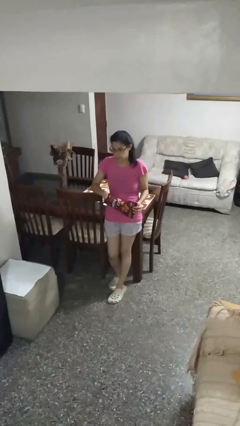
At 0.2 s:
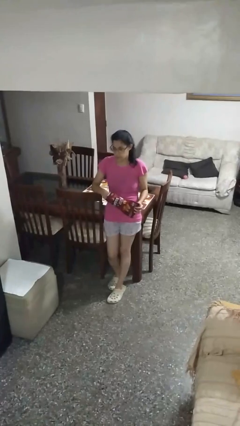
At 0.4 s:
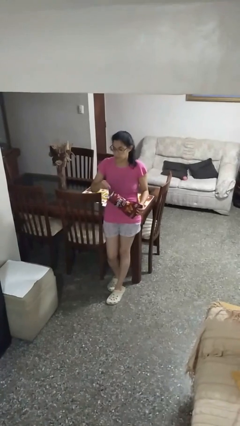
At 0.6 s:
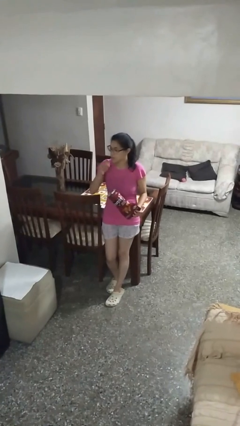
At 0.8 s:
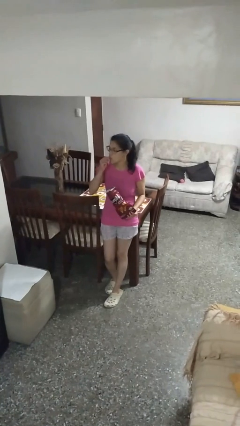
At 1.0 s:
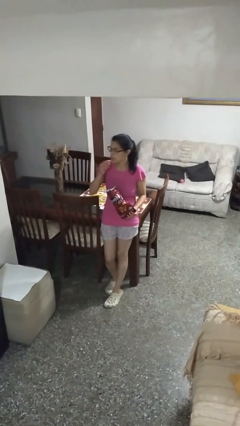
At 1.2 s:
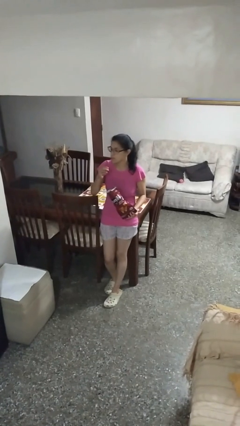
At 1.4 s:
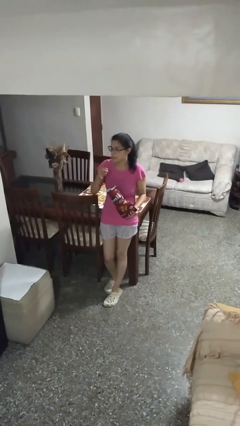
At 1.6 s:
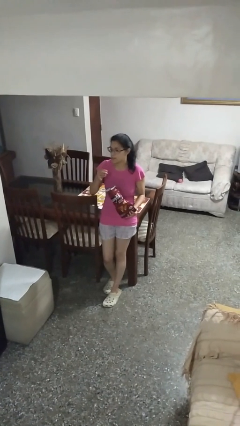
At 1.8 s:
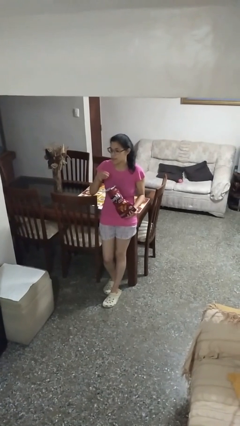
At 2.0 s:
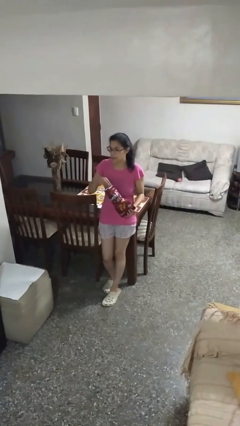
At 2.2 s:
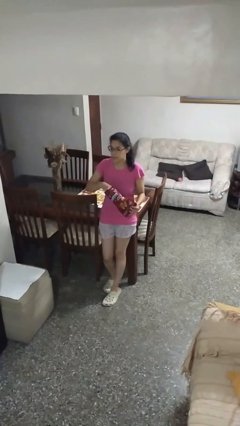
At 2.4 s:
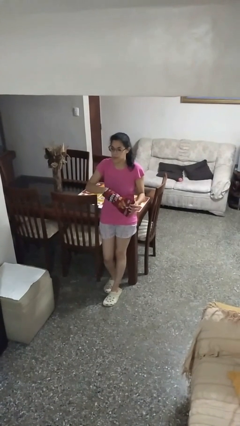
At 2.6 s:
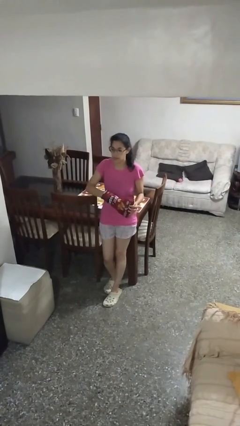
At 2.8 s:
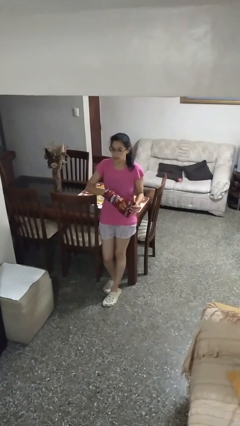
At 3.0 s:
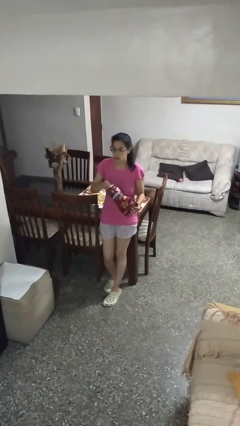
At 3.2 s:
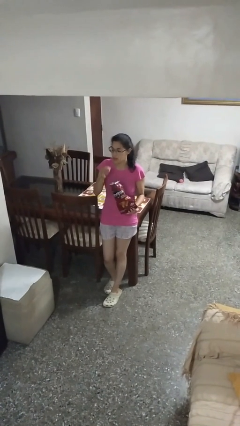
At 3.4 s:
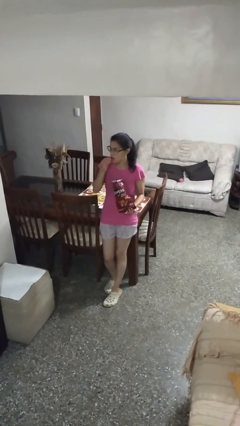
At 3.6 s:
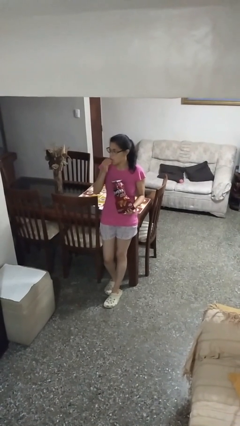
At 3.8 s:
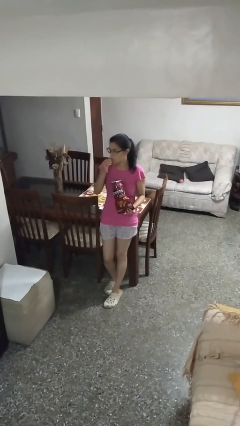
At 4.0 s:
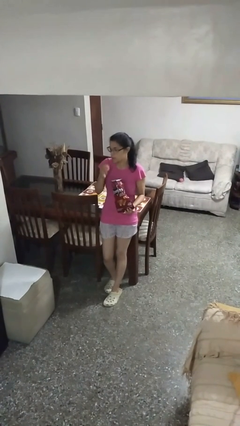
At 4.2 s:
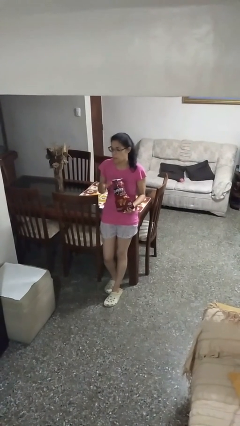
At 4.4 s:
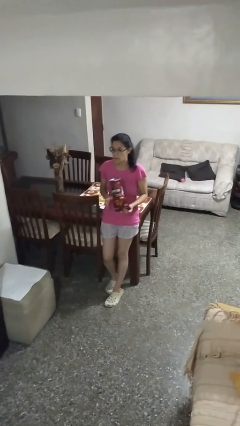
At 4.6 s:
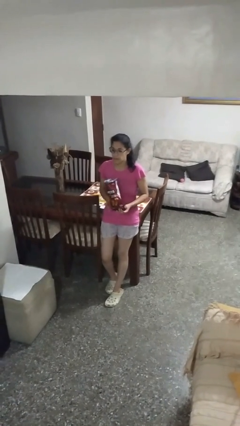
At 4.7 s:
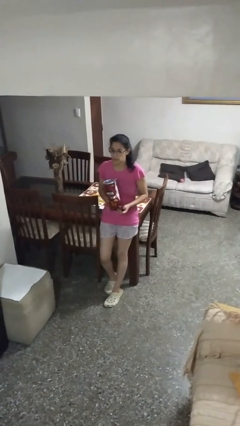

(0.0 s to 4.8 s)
person eats snack from bag

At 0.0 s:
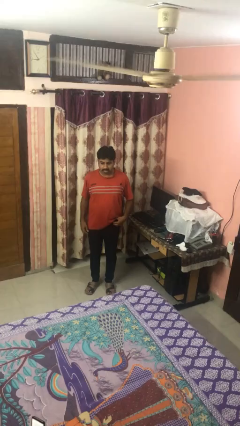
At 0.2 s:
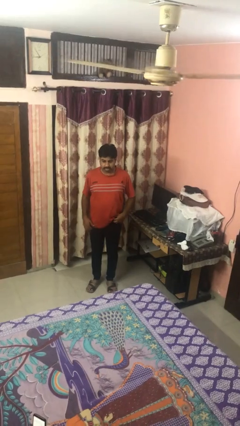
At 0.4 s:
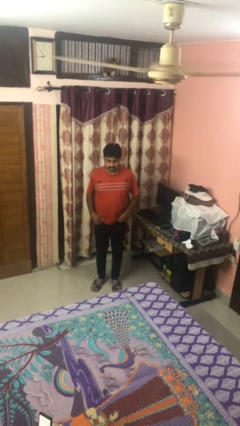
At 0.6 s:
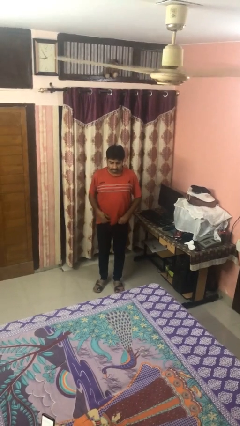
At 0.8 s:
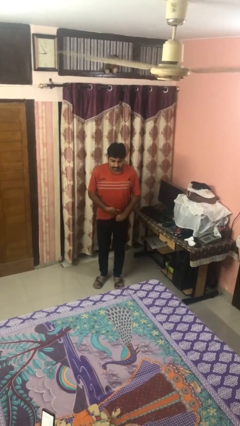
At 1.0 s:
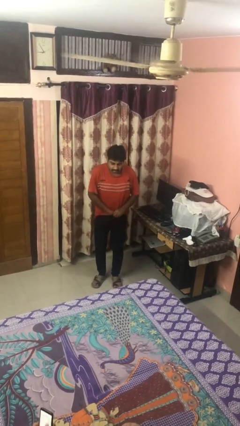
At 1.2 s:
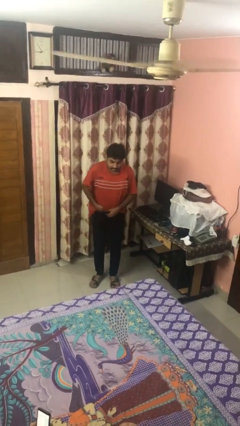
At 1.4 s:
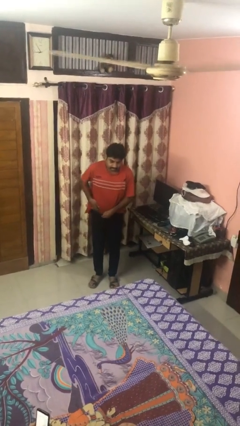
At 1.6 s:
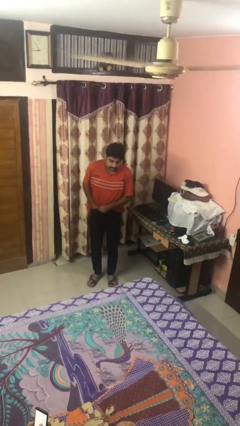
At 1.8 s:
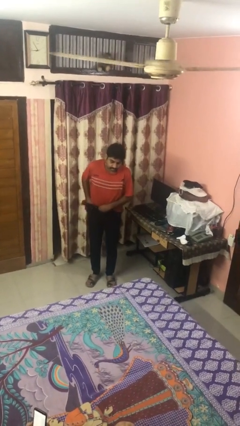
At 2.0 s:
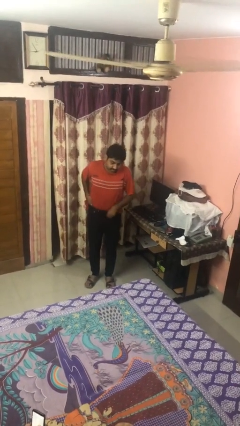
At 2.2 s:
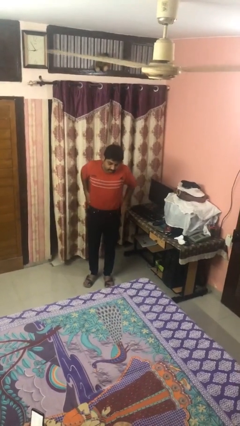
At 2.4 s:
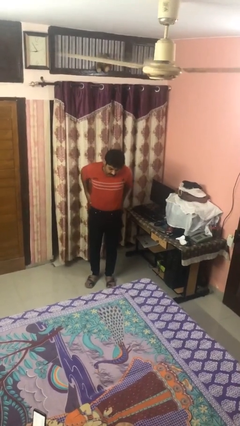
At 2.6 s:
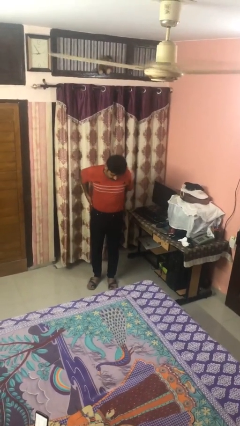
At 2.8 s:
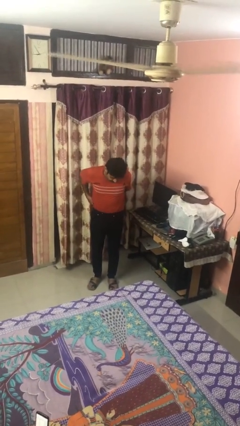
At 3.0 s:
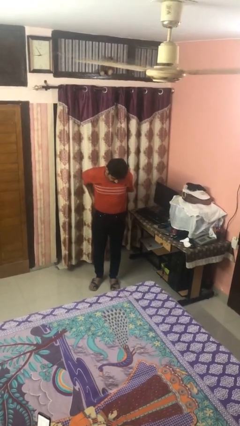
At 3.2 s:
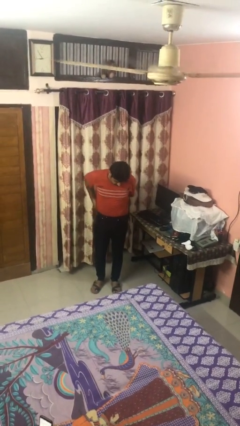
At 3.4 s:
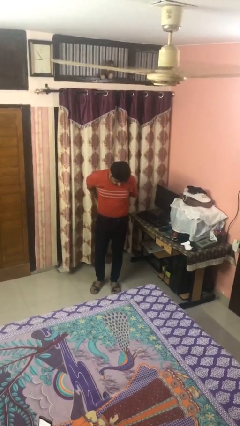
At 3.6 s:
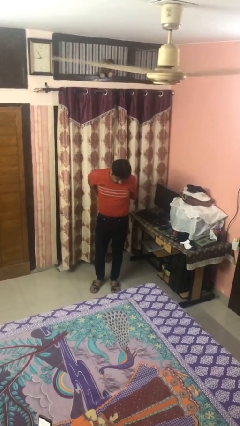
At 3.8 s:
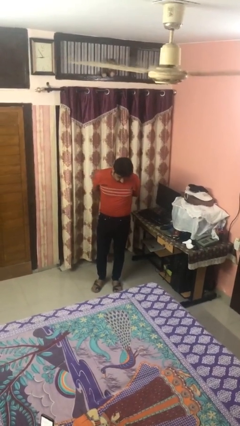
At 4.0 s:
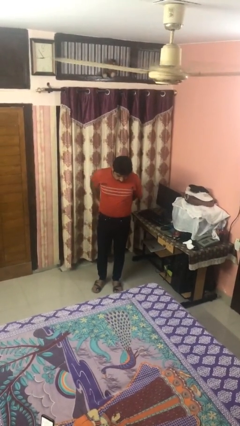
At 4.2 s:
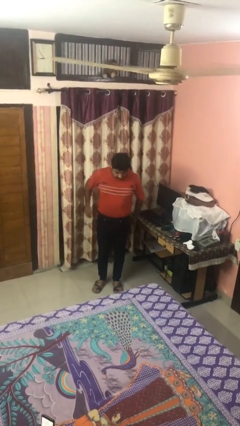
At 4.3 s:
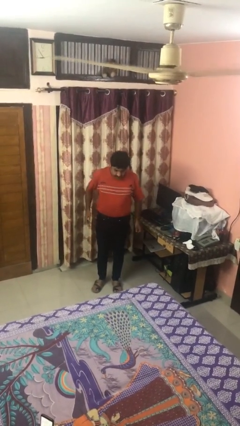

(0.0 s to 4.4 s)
person tucks in shirt

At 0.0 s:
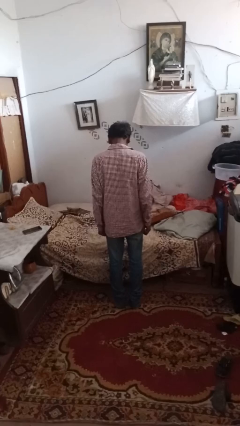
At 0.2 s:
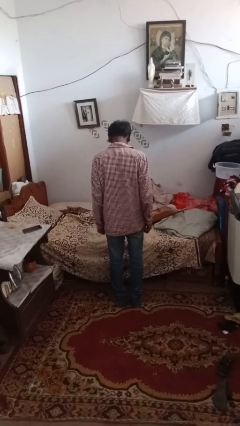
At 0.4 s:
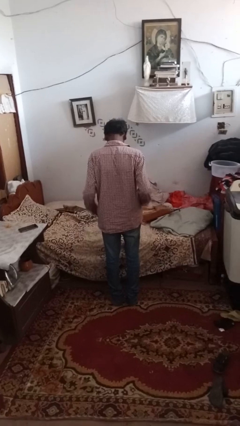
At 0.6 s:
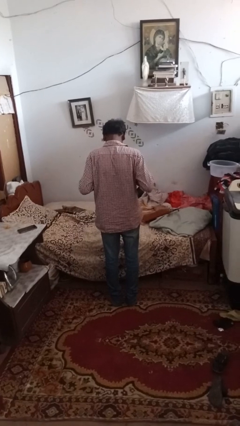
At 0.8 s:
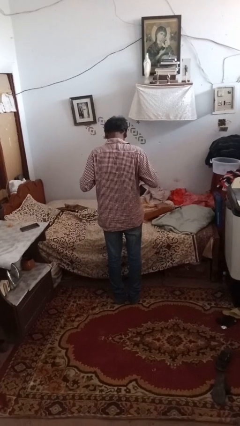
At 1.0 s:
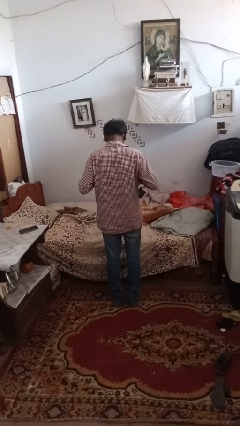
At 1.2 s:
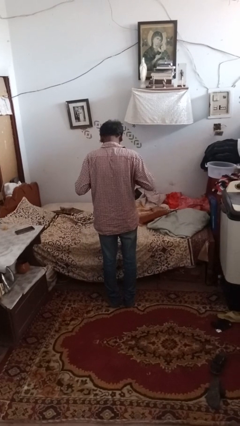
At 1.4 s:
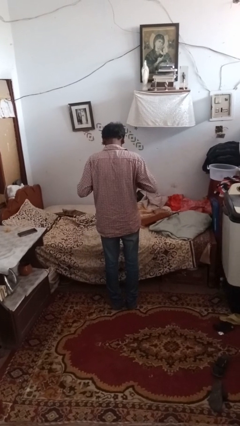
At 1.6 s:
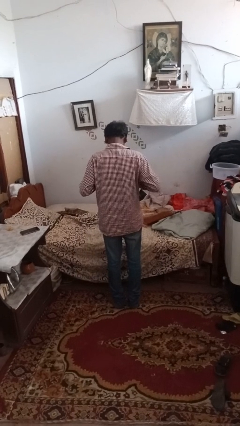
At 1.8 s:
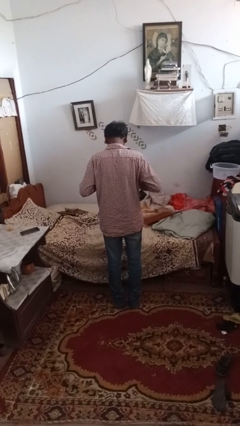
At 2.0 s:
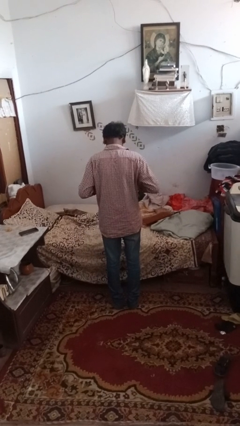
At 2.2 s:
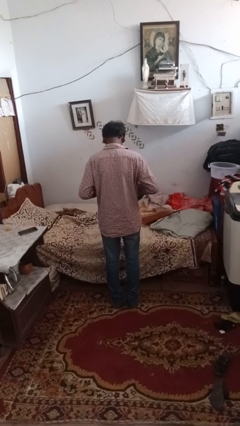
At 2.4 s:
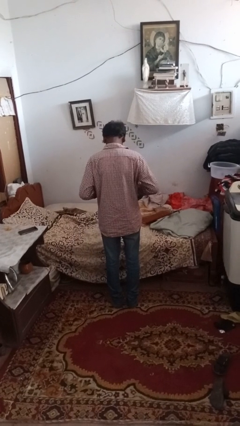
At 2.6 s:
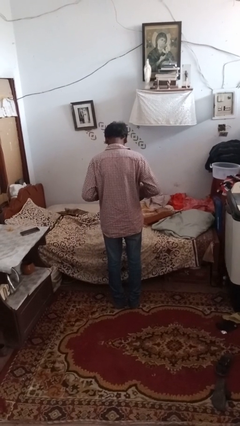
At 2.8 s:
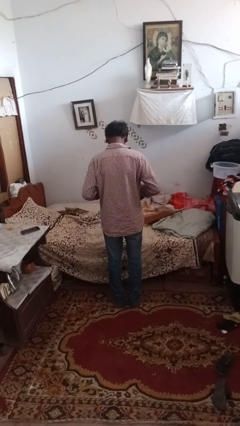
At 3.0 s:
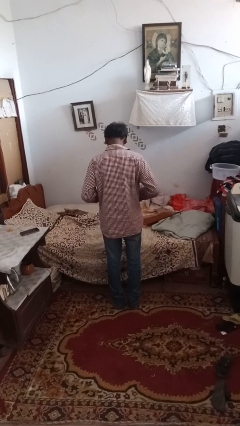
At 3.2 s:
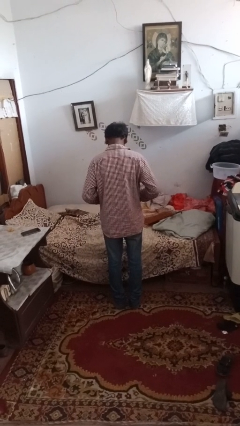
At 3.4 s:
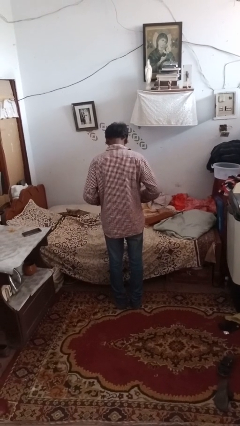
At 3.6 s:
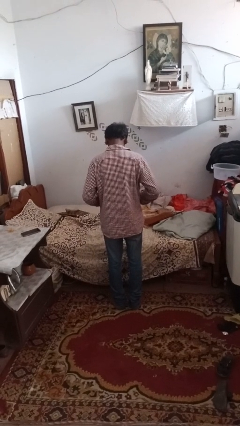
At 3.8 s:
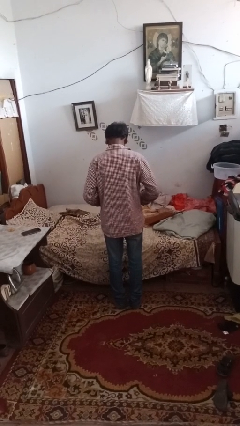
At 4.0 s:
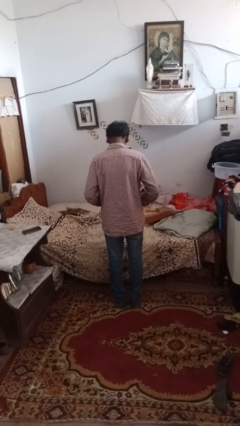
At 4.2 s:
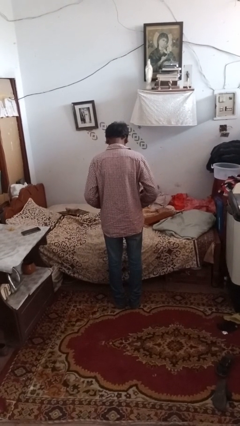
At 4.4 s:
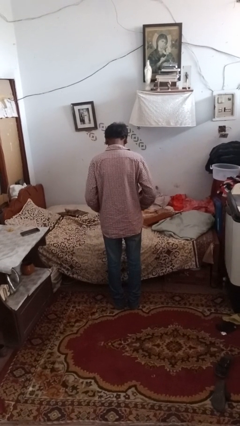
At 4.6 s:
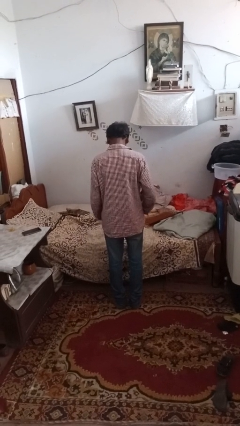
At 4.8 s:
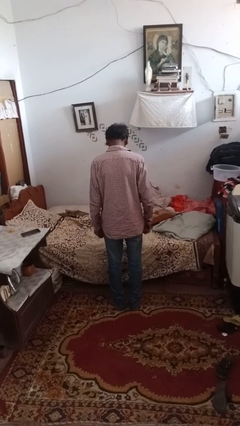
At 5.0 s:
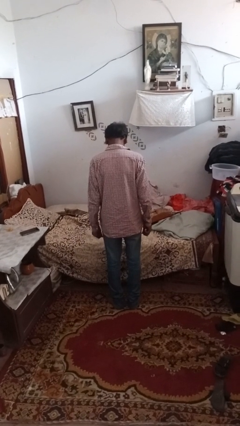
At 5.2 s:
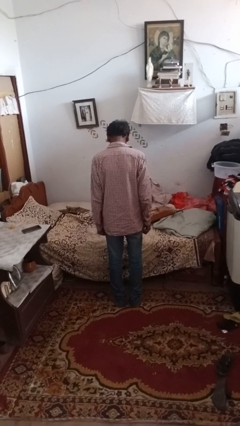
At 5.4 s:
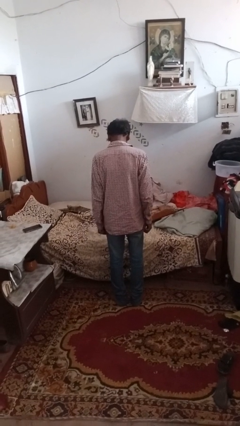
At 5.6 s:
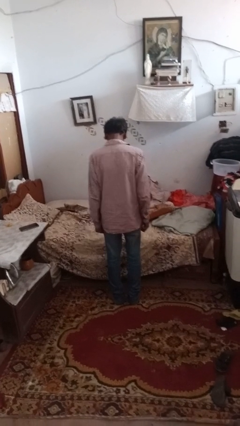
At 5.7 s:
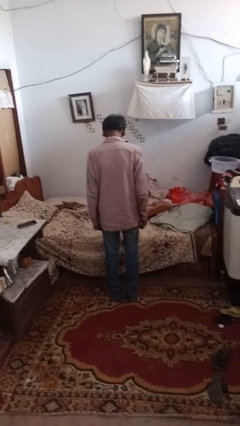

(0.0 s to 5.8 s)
person unbuttons shirt

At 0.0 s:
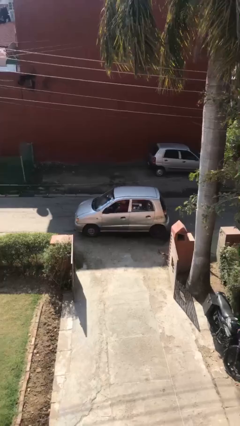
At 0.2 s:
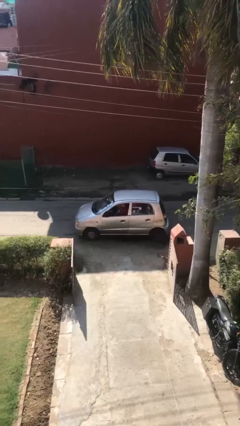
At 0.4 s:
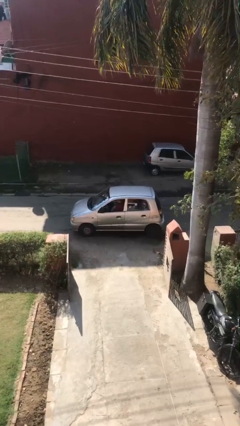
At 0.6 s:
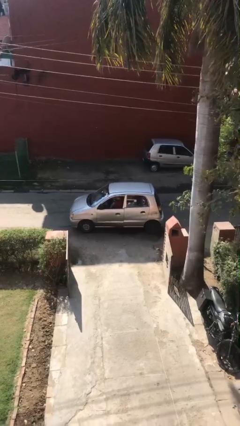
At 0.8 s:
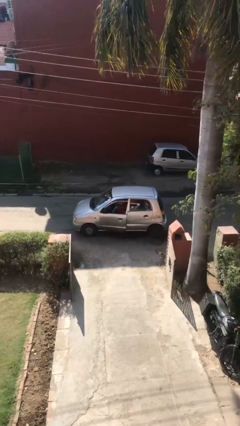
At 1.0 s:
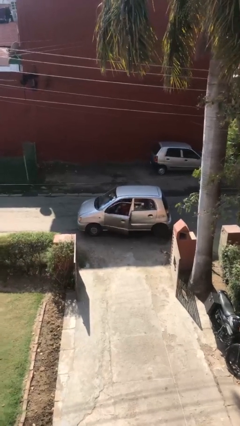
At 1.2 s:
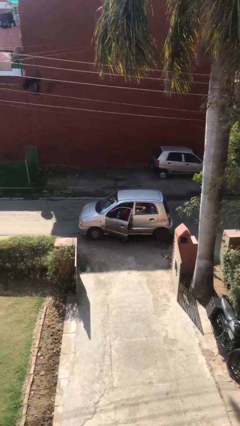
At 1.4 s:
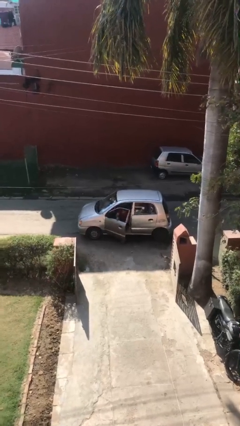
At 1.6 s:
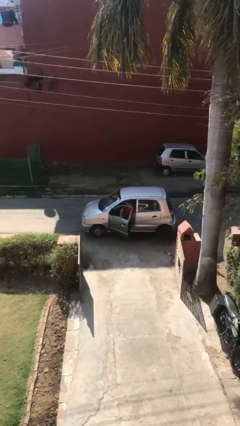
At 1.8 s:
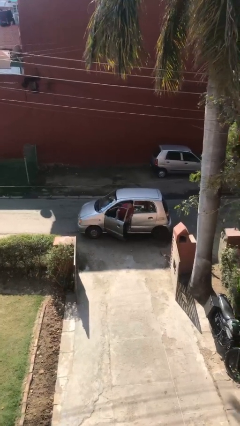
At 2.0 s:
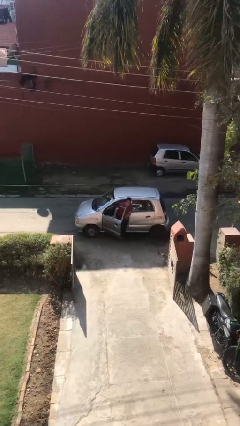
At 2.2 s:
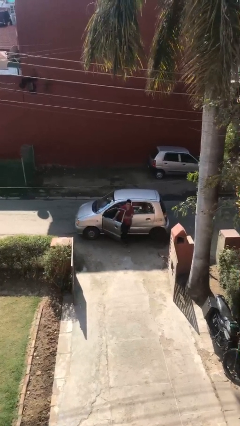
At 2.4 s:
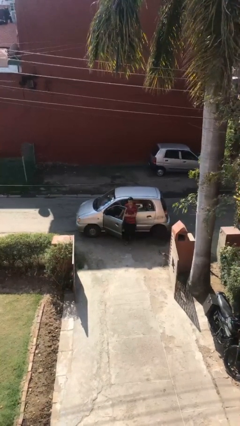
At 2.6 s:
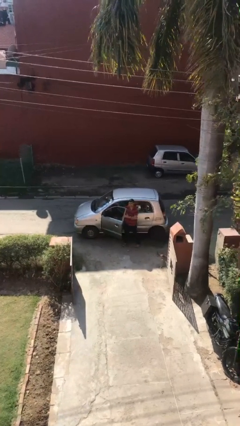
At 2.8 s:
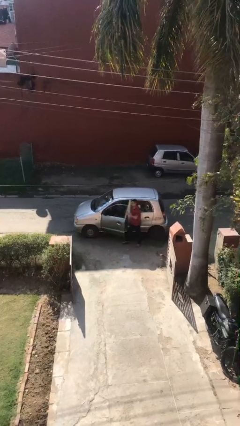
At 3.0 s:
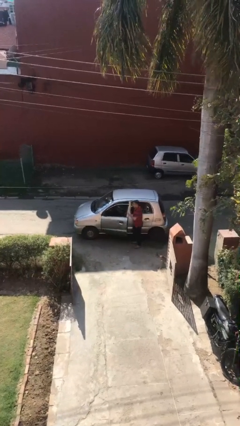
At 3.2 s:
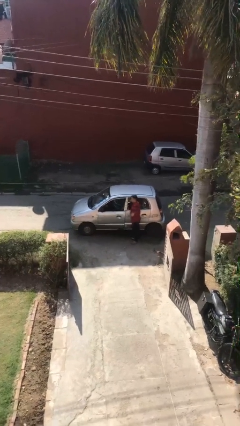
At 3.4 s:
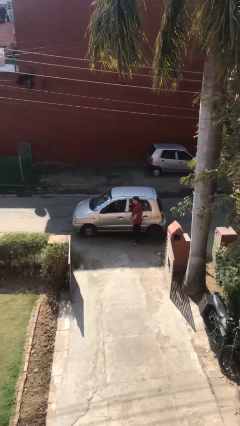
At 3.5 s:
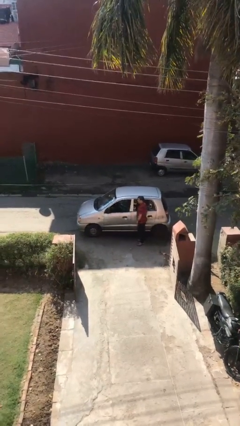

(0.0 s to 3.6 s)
car drops off person
